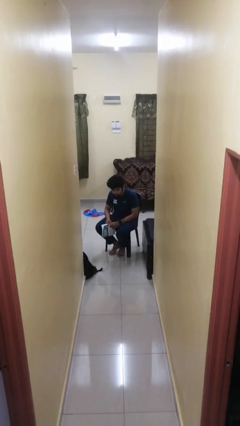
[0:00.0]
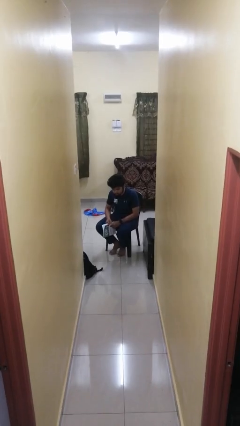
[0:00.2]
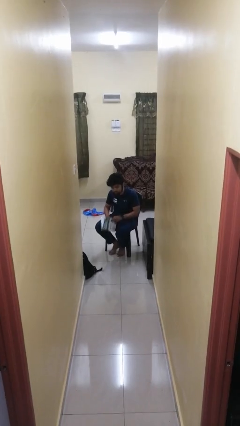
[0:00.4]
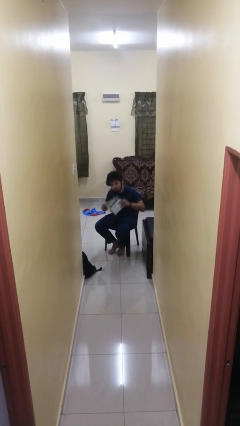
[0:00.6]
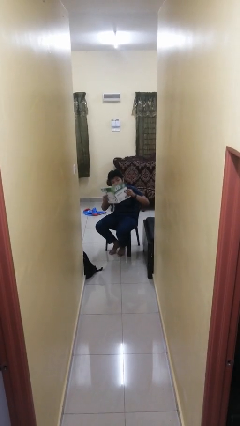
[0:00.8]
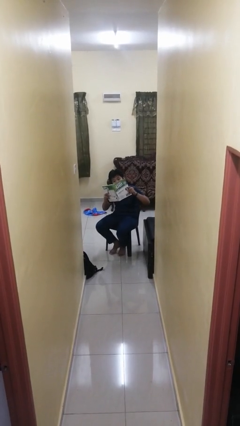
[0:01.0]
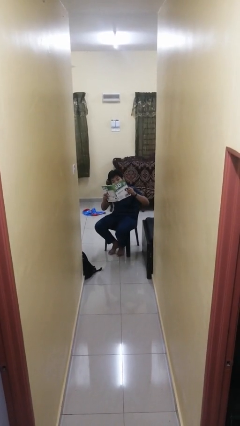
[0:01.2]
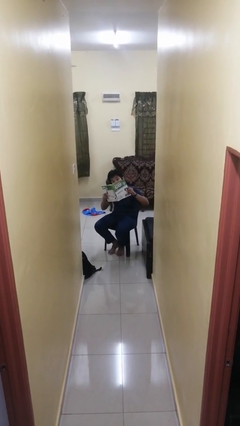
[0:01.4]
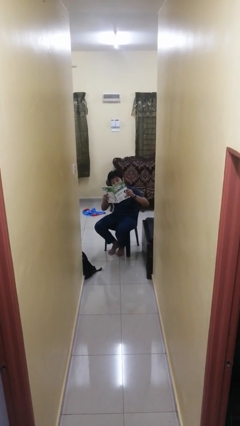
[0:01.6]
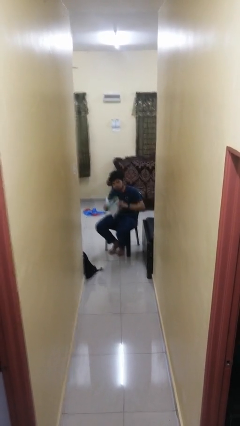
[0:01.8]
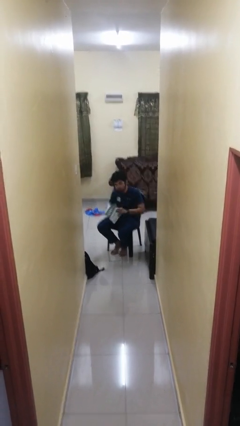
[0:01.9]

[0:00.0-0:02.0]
person reads magazine

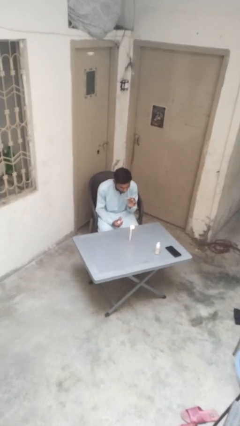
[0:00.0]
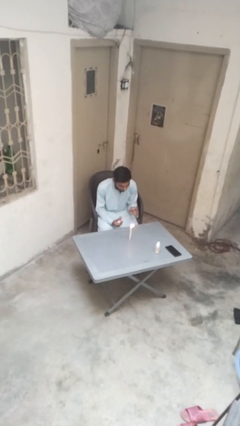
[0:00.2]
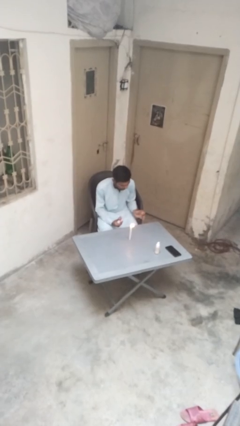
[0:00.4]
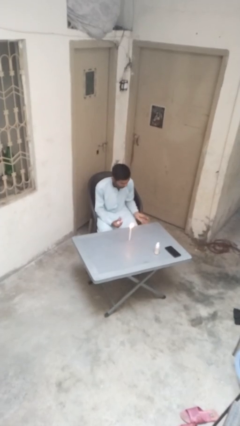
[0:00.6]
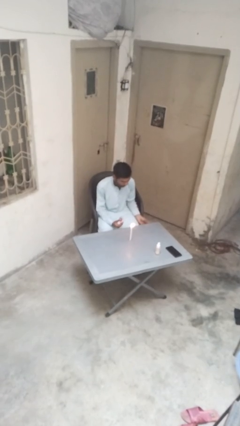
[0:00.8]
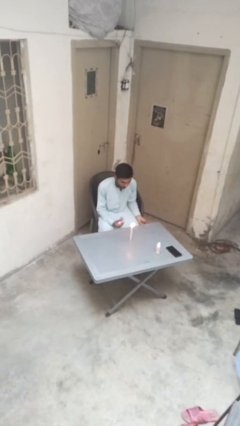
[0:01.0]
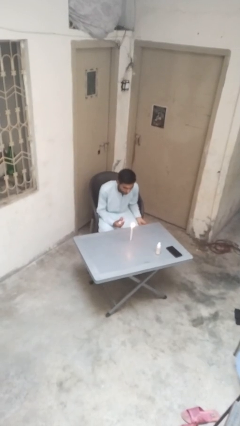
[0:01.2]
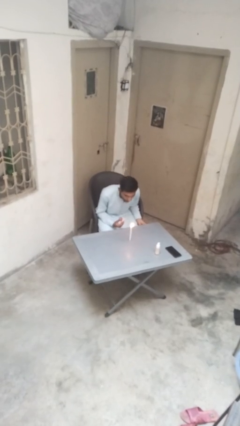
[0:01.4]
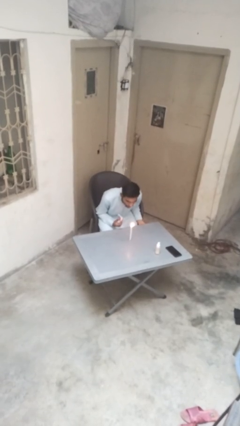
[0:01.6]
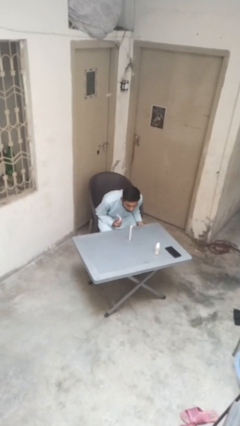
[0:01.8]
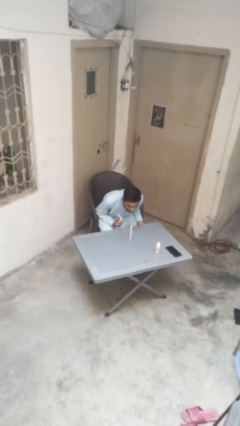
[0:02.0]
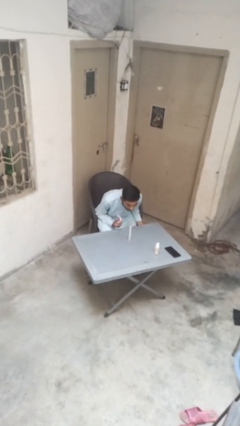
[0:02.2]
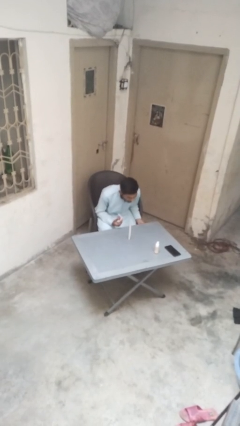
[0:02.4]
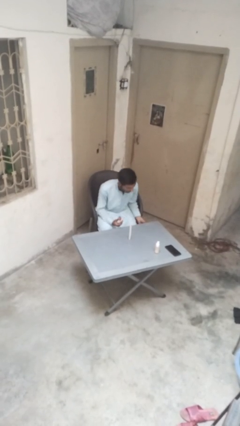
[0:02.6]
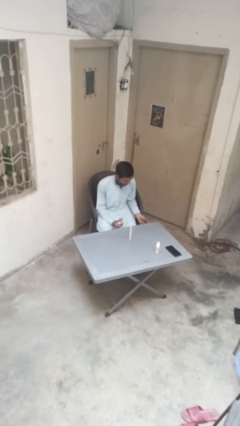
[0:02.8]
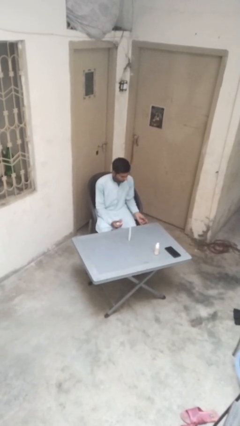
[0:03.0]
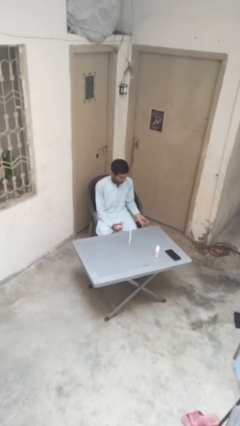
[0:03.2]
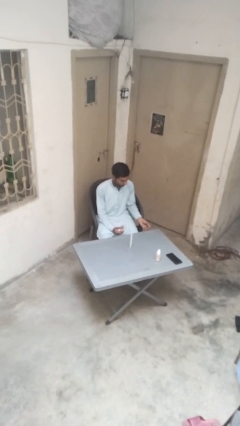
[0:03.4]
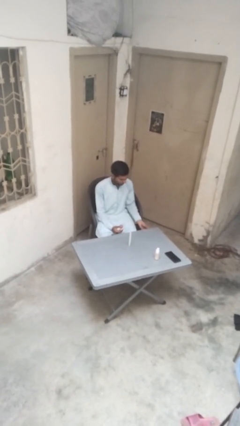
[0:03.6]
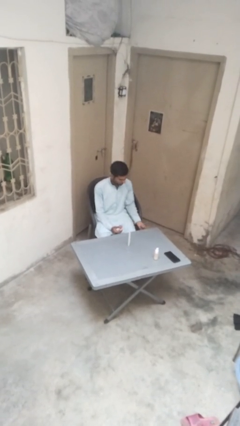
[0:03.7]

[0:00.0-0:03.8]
person extinguishes candle

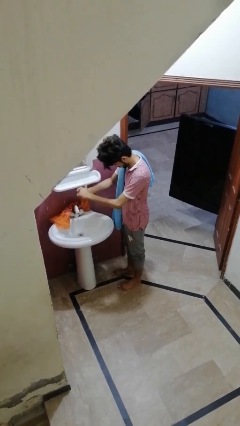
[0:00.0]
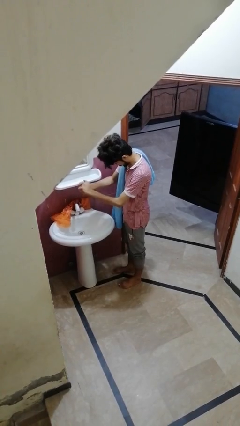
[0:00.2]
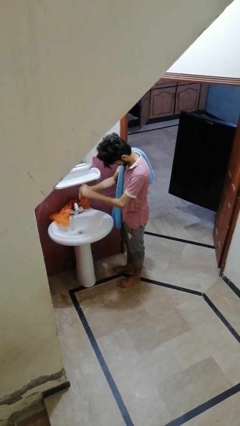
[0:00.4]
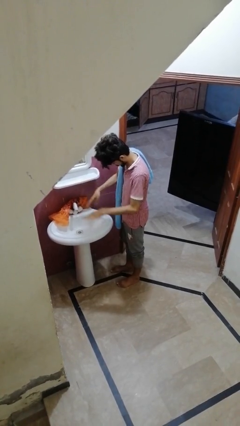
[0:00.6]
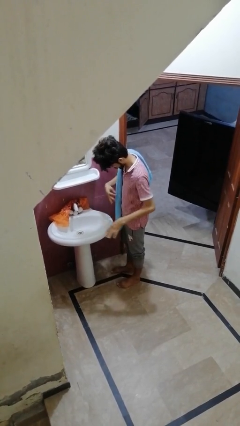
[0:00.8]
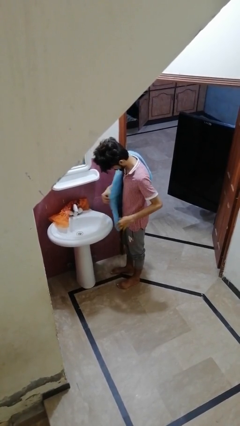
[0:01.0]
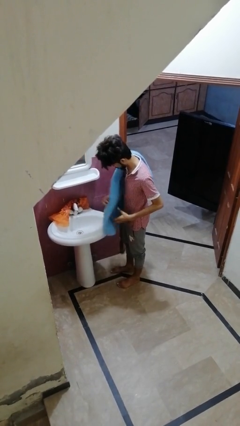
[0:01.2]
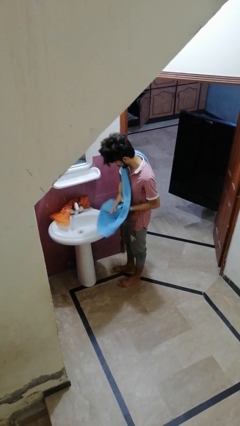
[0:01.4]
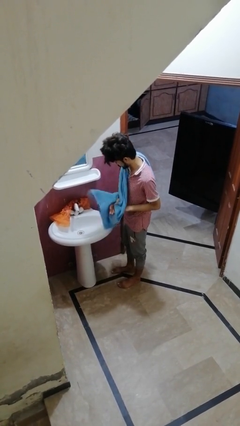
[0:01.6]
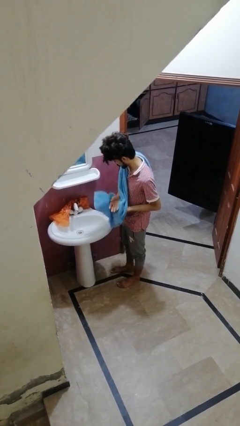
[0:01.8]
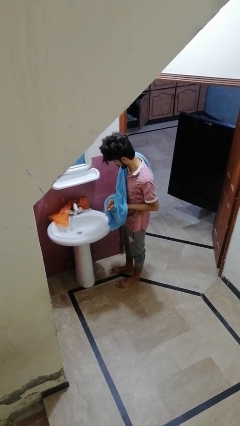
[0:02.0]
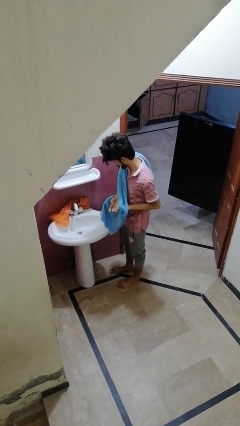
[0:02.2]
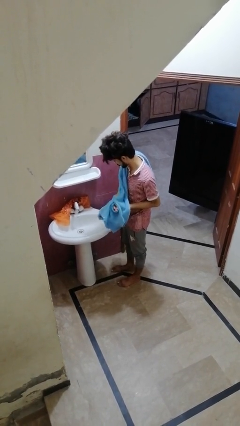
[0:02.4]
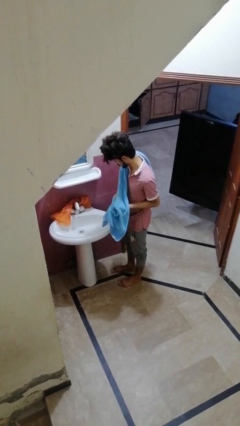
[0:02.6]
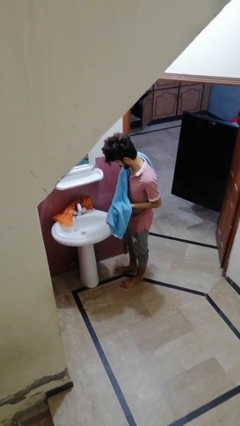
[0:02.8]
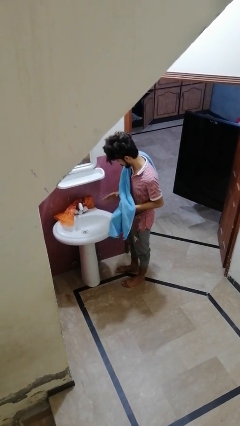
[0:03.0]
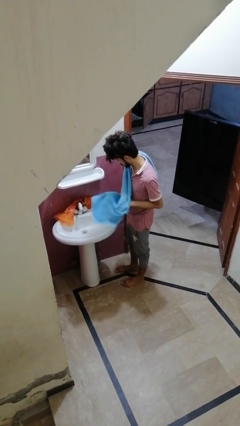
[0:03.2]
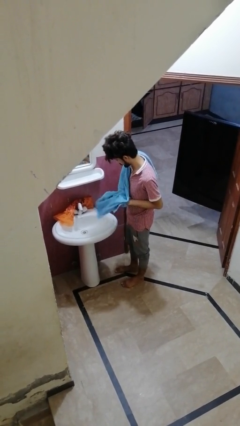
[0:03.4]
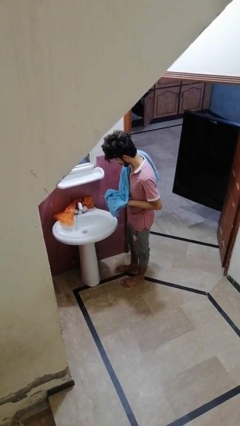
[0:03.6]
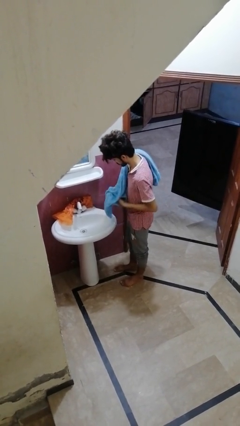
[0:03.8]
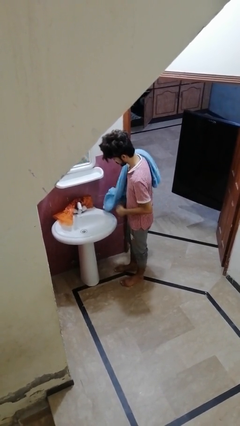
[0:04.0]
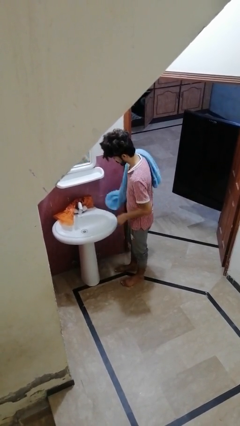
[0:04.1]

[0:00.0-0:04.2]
person dries hands with towel

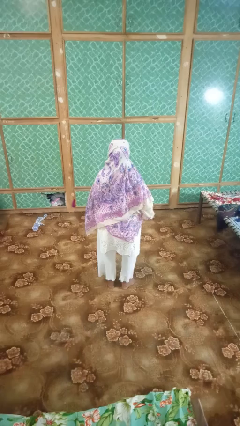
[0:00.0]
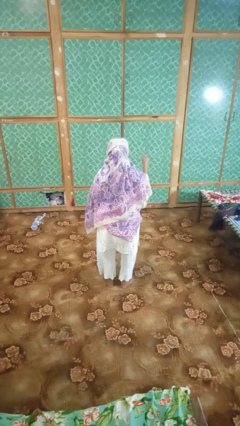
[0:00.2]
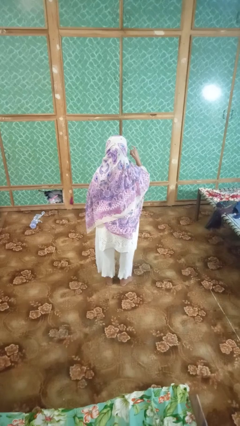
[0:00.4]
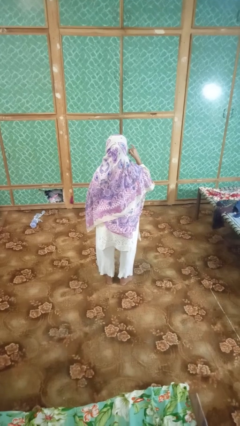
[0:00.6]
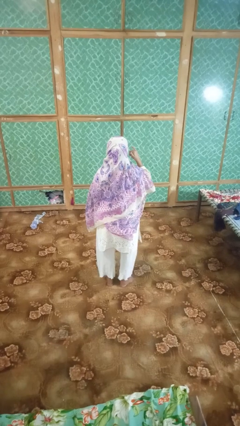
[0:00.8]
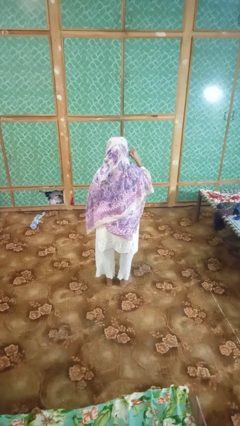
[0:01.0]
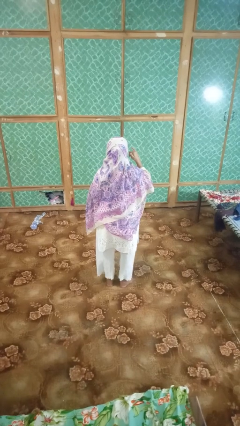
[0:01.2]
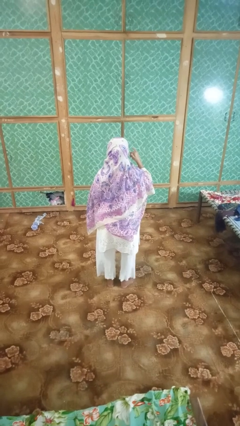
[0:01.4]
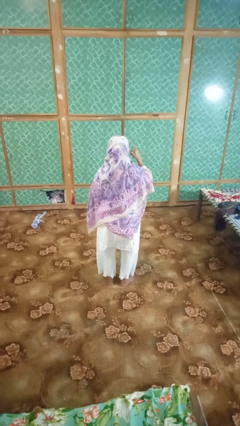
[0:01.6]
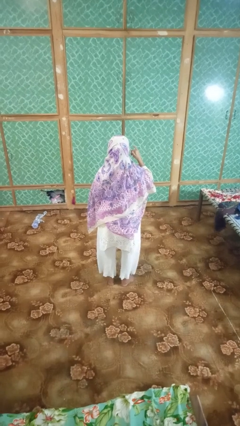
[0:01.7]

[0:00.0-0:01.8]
person gestures call me

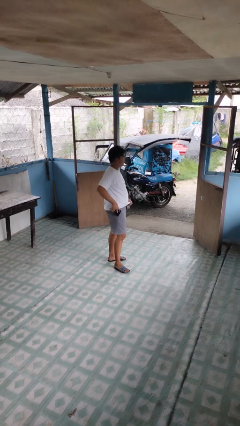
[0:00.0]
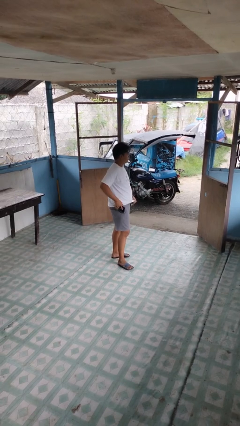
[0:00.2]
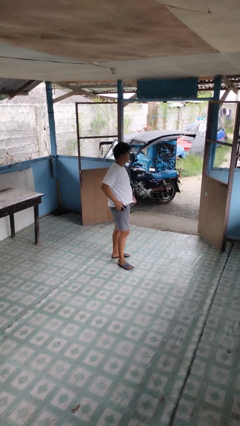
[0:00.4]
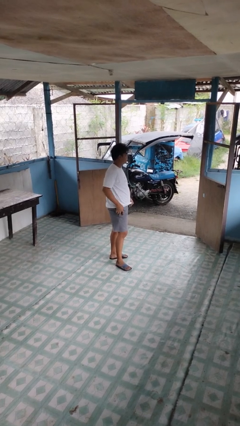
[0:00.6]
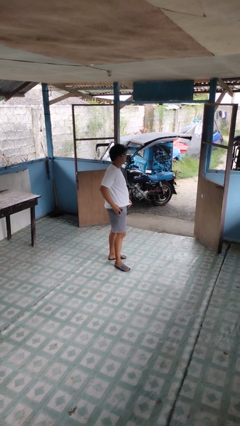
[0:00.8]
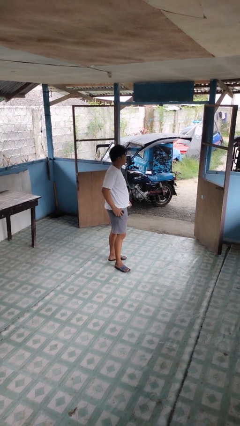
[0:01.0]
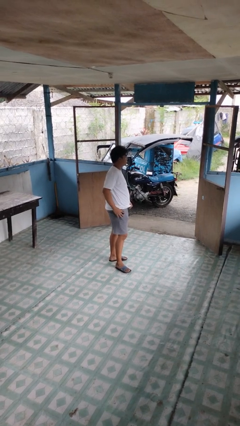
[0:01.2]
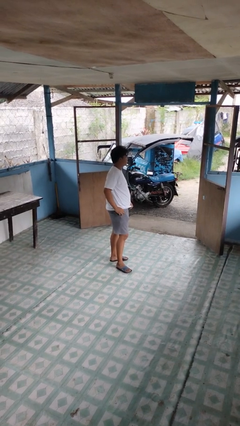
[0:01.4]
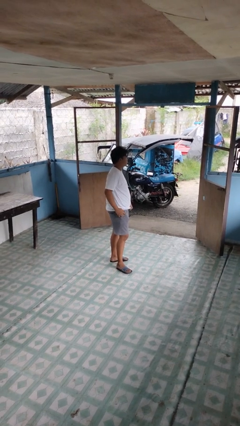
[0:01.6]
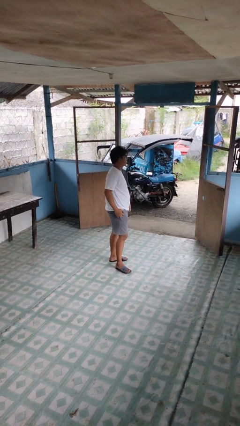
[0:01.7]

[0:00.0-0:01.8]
person puts phone into pocket

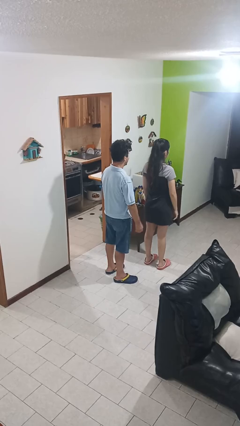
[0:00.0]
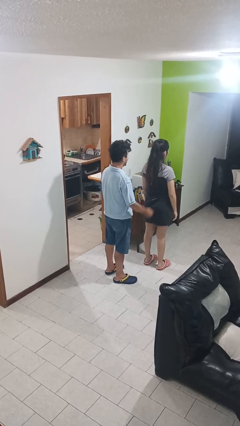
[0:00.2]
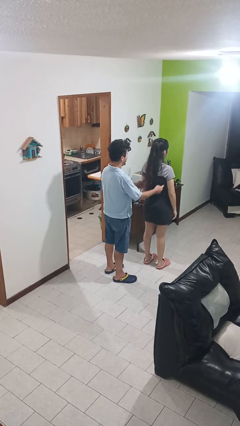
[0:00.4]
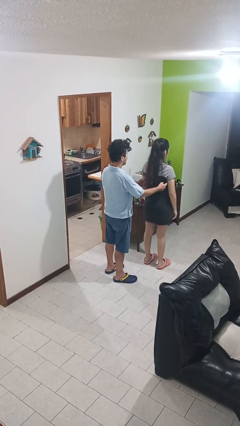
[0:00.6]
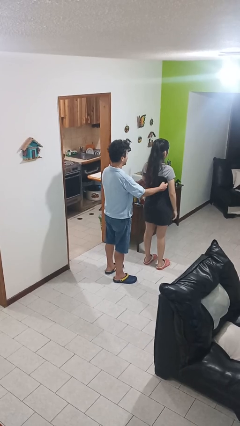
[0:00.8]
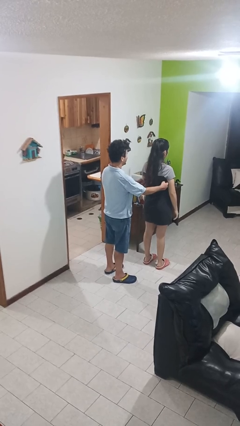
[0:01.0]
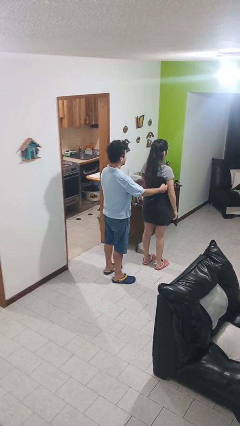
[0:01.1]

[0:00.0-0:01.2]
person tickles person

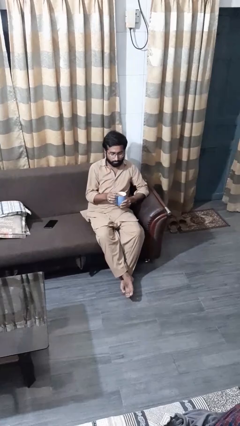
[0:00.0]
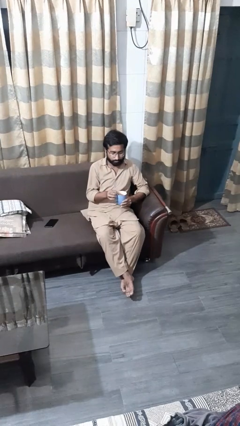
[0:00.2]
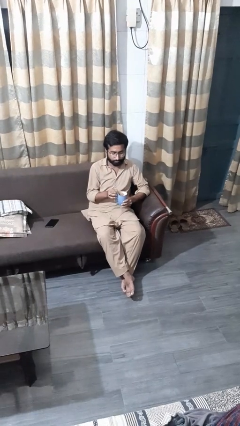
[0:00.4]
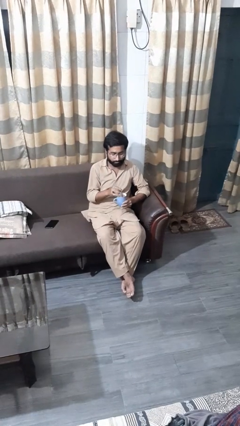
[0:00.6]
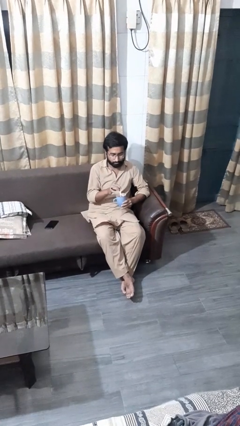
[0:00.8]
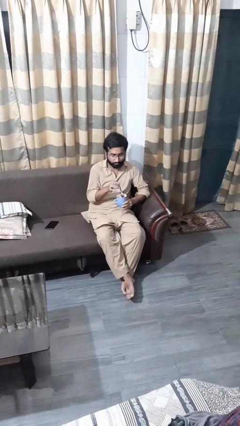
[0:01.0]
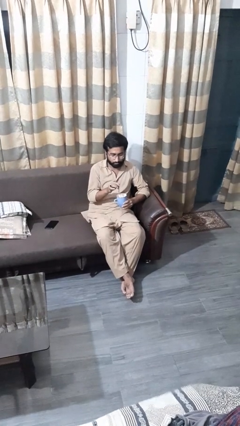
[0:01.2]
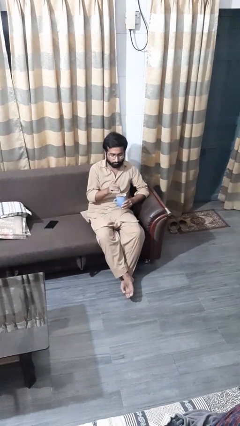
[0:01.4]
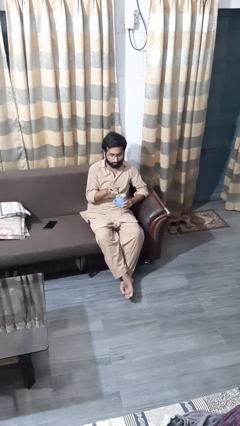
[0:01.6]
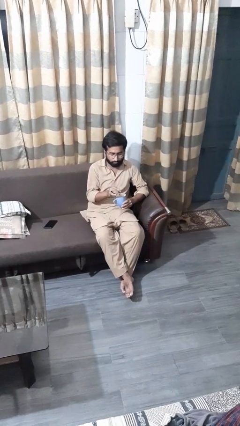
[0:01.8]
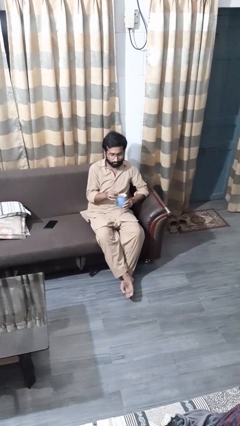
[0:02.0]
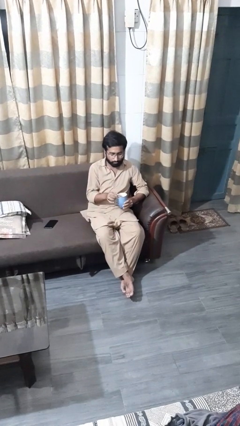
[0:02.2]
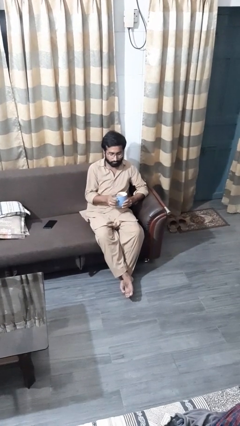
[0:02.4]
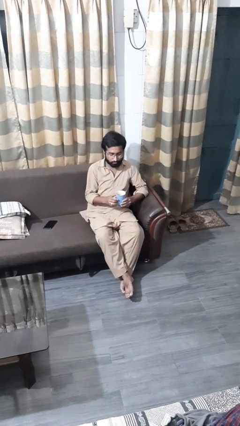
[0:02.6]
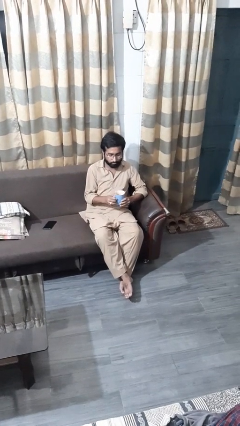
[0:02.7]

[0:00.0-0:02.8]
person stirs mug
